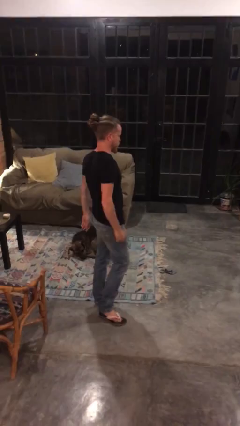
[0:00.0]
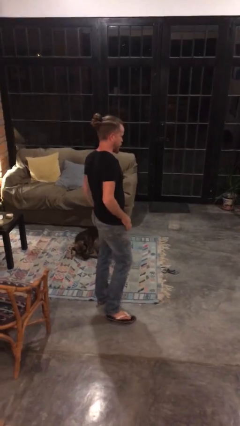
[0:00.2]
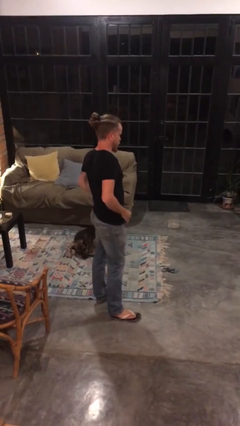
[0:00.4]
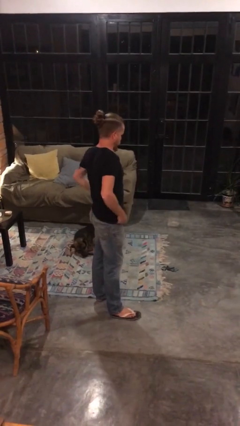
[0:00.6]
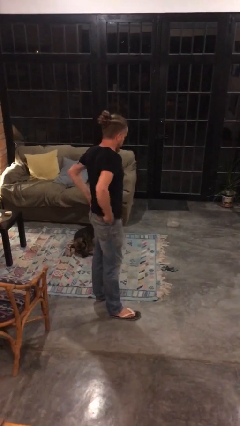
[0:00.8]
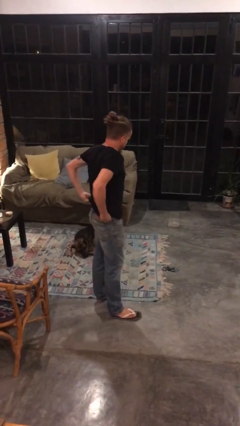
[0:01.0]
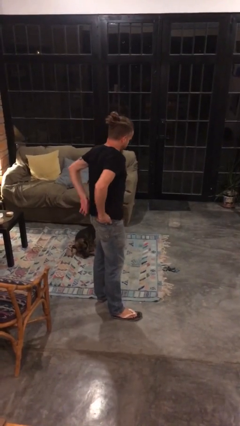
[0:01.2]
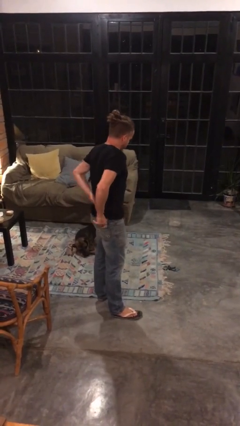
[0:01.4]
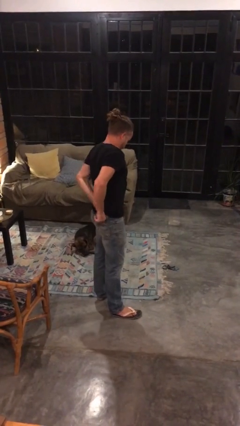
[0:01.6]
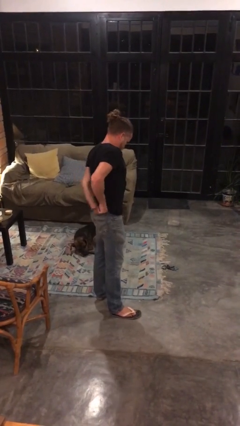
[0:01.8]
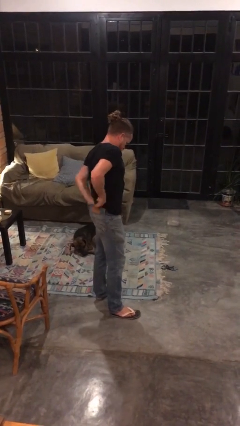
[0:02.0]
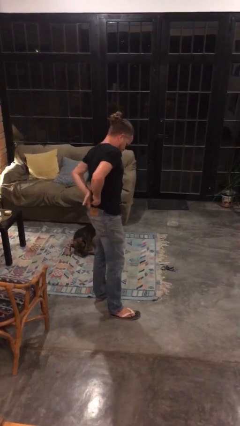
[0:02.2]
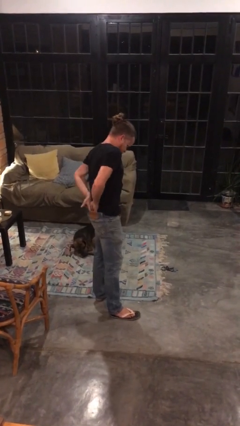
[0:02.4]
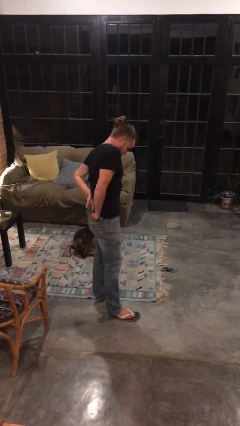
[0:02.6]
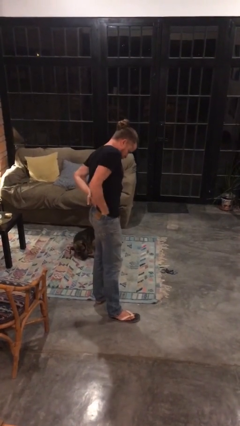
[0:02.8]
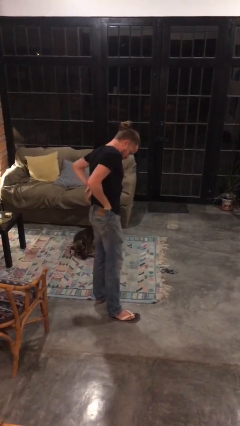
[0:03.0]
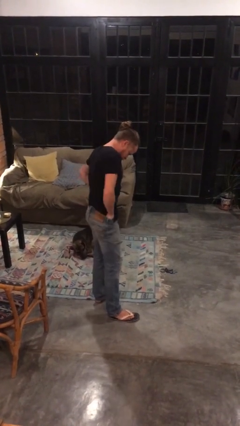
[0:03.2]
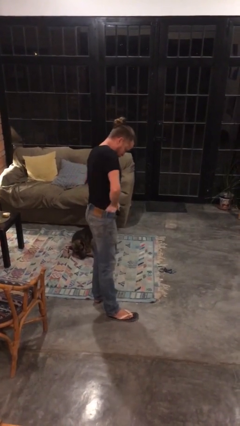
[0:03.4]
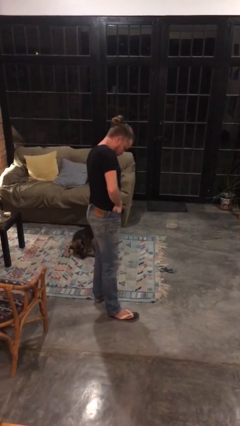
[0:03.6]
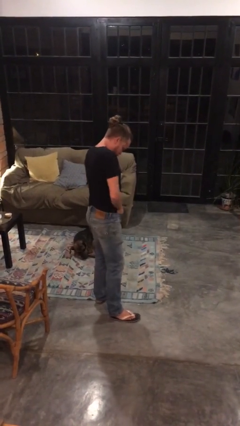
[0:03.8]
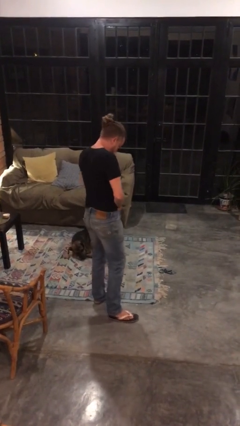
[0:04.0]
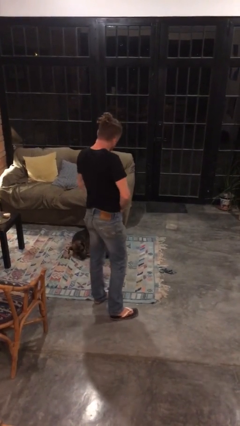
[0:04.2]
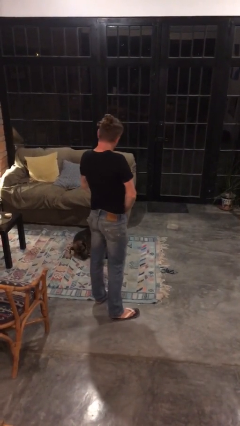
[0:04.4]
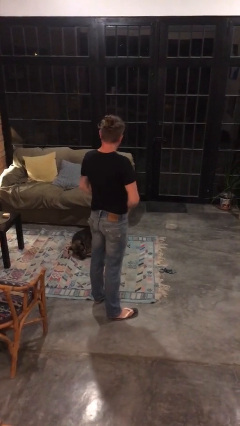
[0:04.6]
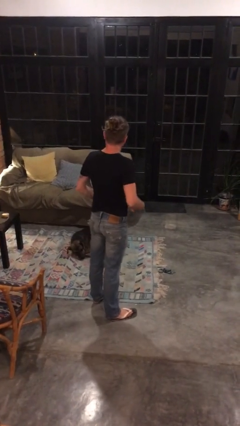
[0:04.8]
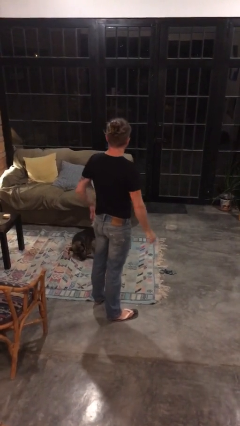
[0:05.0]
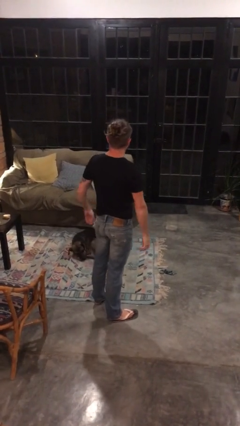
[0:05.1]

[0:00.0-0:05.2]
person tucks in shirt

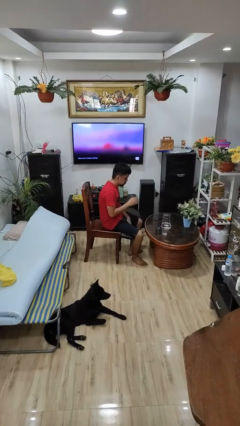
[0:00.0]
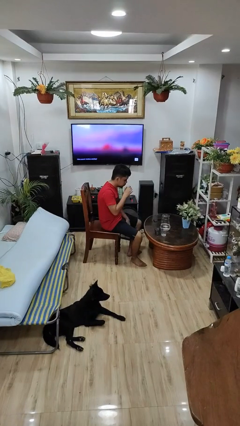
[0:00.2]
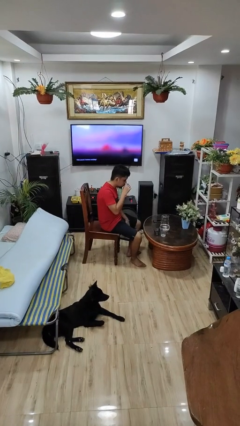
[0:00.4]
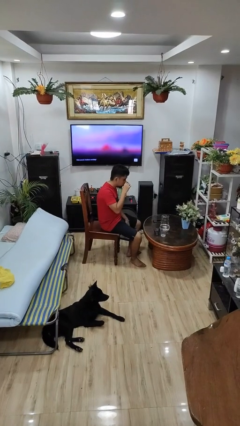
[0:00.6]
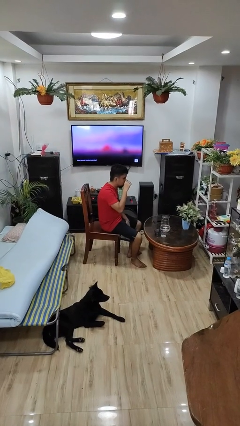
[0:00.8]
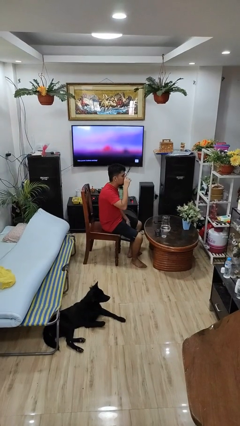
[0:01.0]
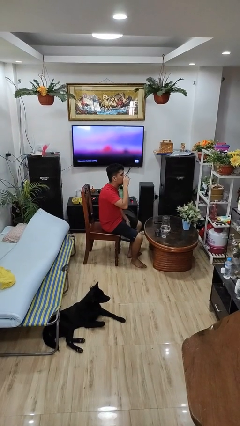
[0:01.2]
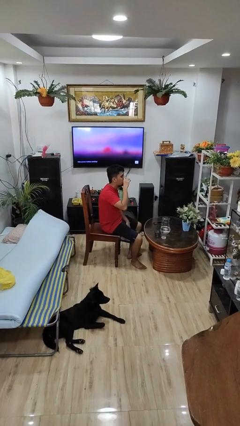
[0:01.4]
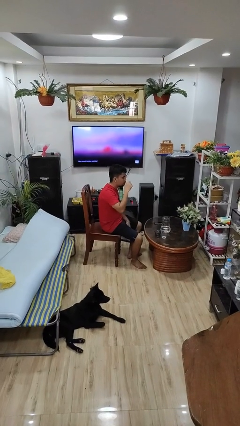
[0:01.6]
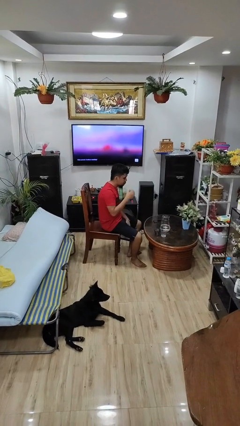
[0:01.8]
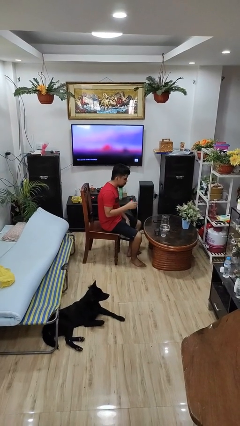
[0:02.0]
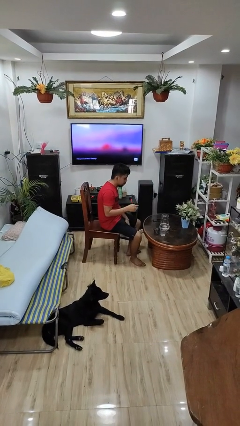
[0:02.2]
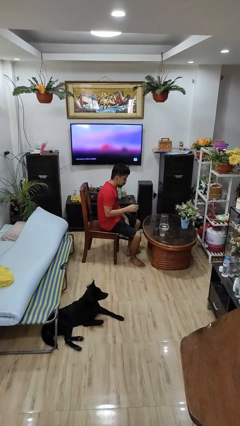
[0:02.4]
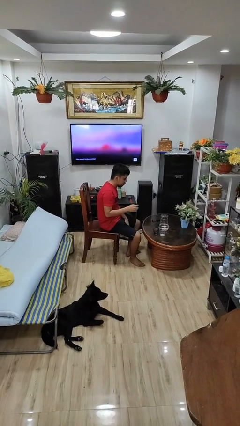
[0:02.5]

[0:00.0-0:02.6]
person drinks from shotglass

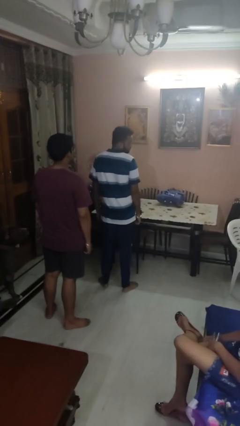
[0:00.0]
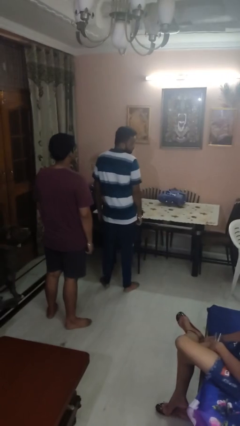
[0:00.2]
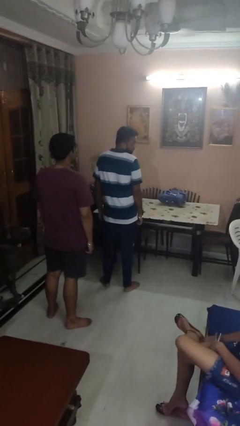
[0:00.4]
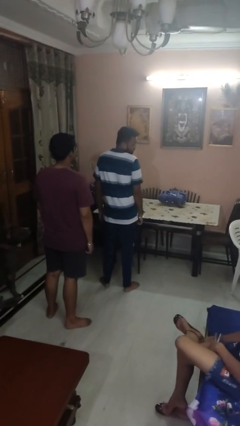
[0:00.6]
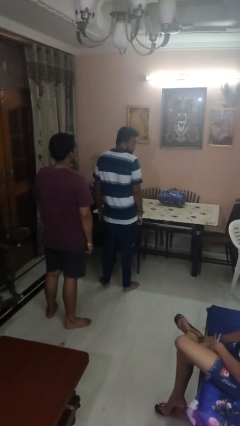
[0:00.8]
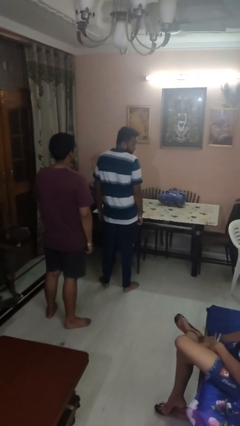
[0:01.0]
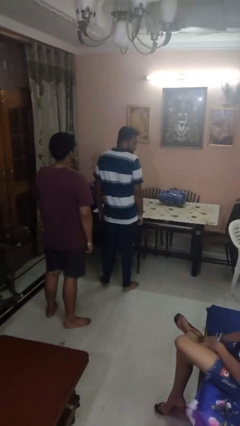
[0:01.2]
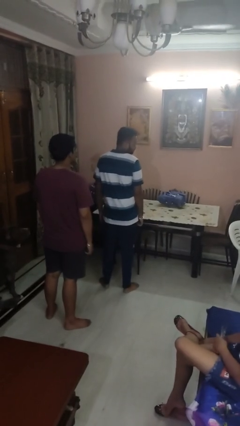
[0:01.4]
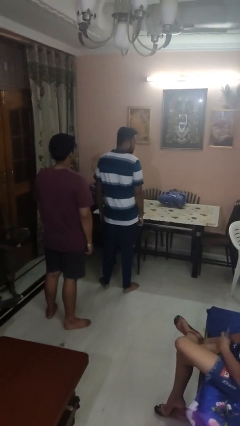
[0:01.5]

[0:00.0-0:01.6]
person looks over shoulder

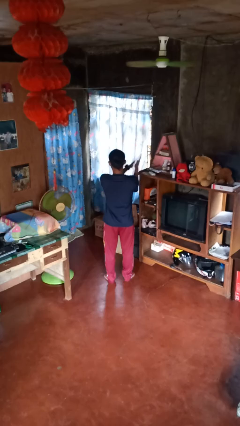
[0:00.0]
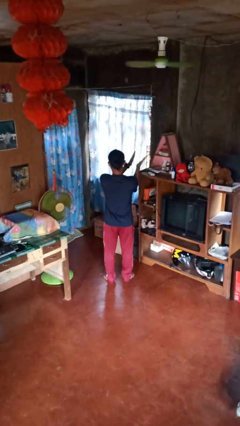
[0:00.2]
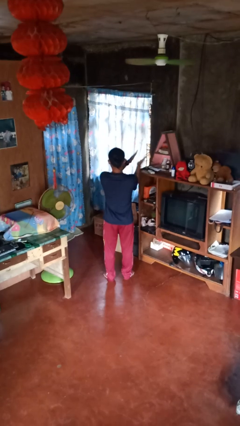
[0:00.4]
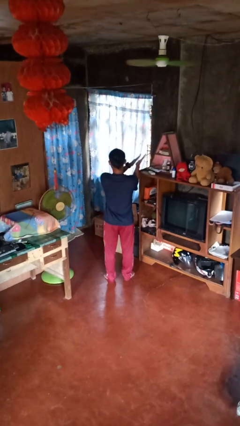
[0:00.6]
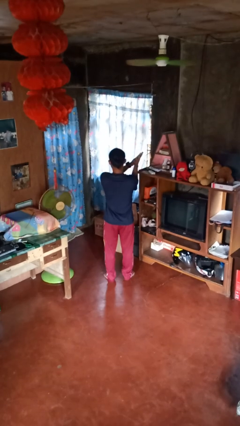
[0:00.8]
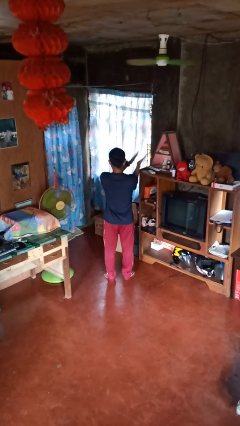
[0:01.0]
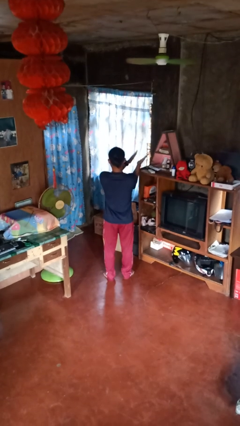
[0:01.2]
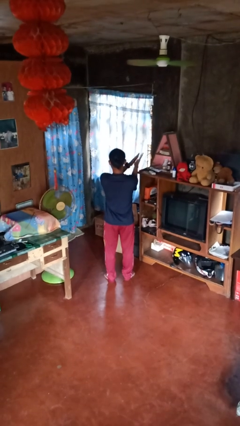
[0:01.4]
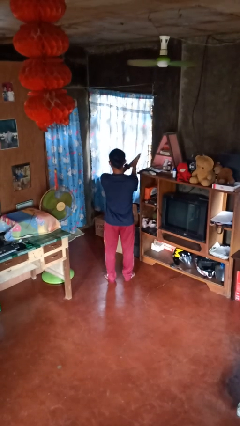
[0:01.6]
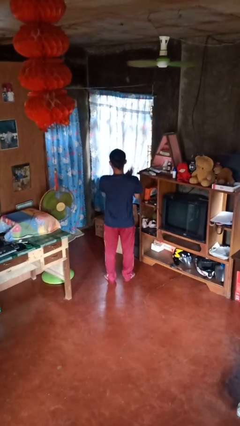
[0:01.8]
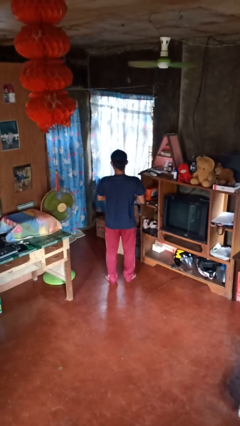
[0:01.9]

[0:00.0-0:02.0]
person claps hands

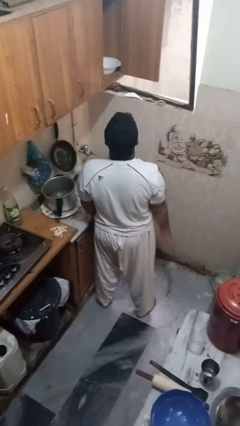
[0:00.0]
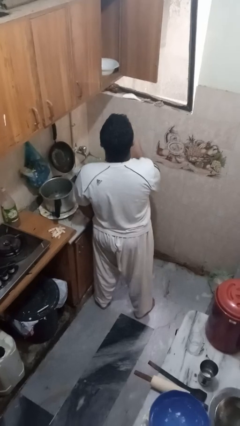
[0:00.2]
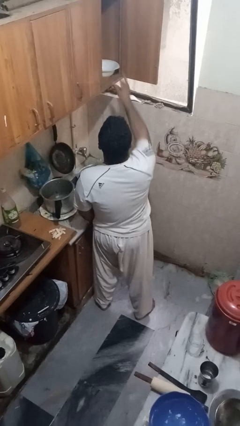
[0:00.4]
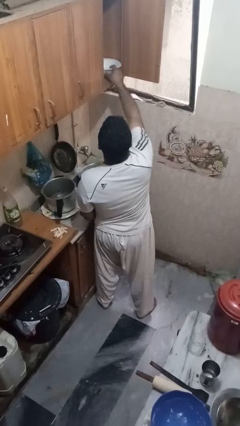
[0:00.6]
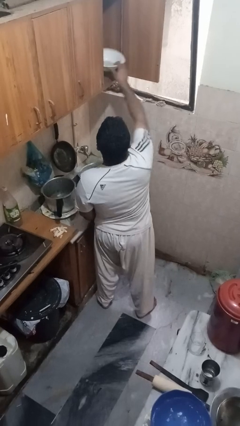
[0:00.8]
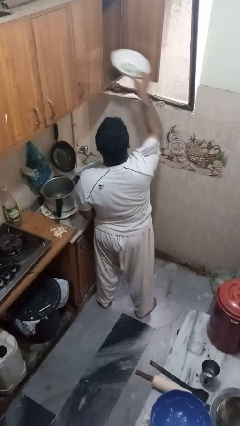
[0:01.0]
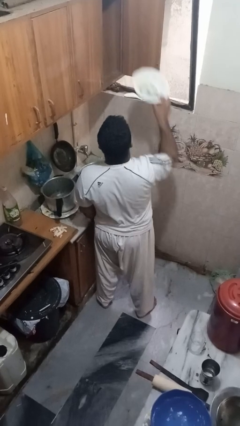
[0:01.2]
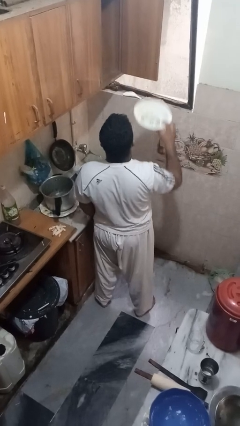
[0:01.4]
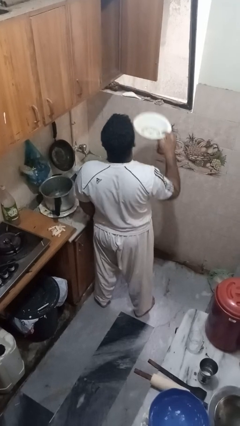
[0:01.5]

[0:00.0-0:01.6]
person takes object from cabinet

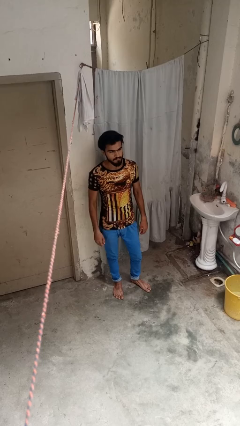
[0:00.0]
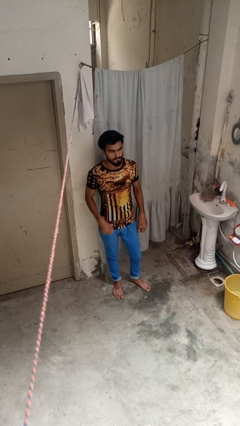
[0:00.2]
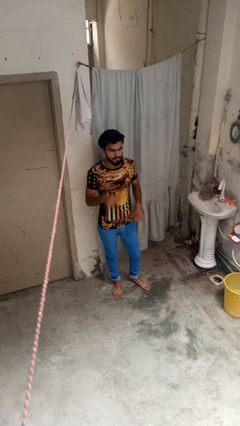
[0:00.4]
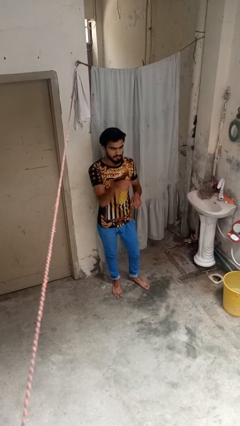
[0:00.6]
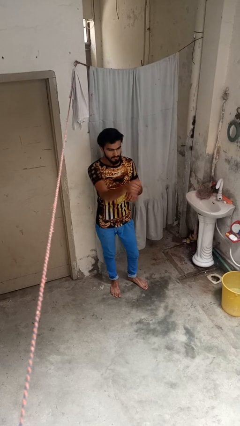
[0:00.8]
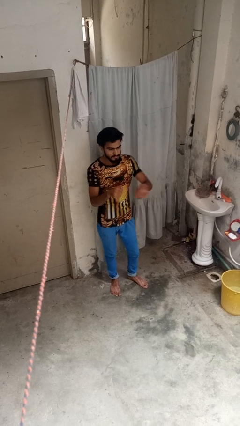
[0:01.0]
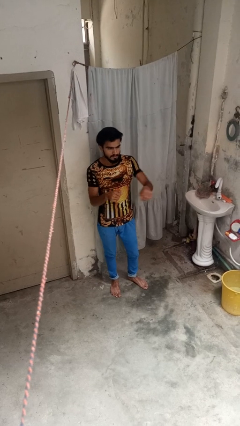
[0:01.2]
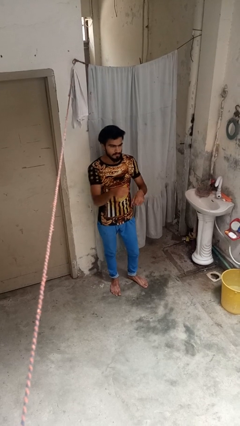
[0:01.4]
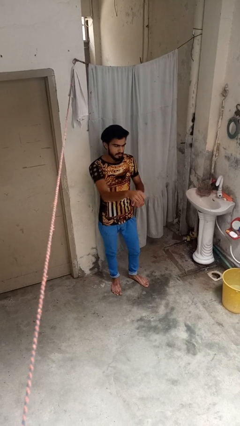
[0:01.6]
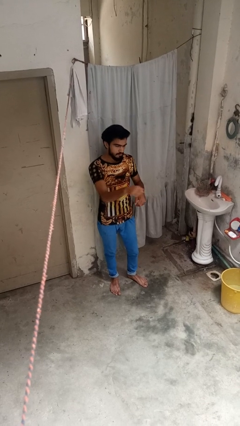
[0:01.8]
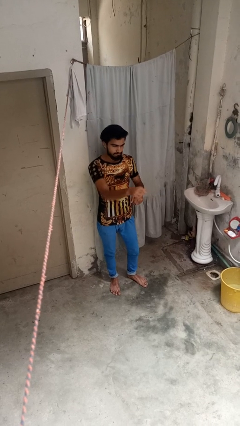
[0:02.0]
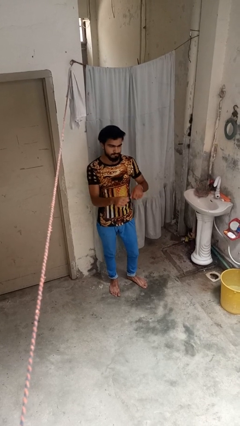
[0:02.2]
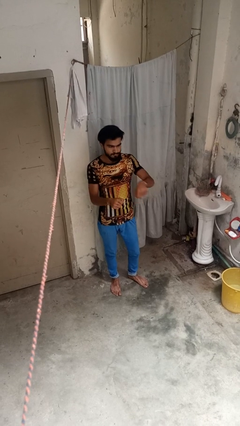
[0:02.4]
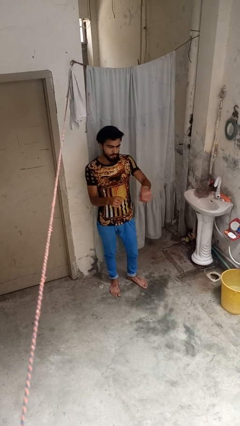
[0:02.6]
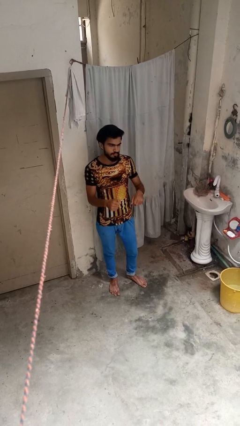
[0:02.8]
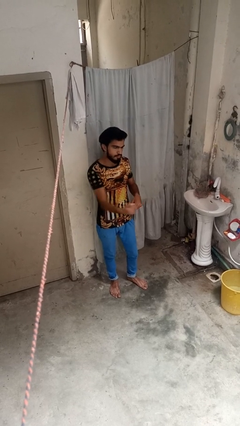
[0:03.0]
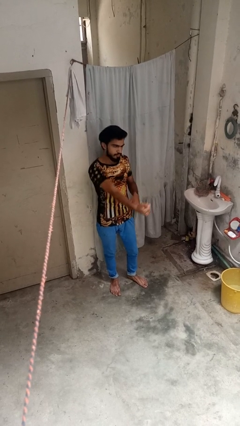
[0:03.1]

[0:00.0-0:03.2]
person punches

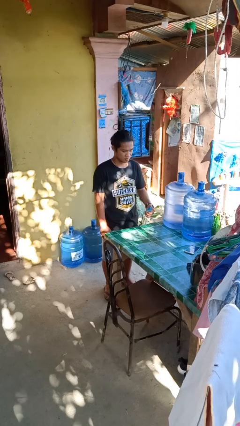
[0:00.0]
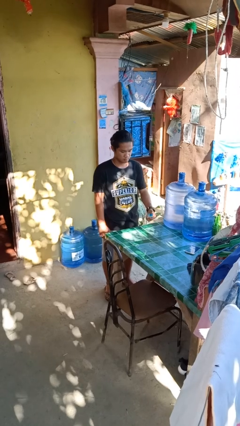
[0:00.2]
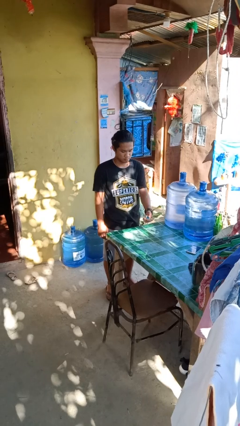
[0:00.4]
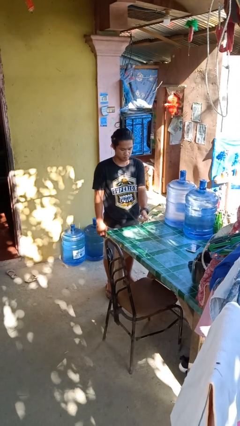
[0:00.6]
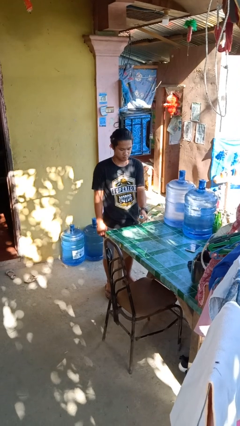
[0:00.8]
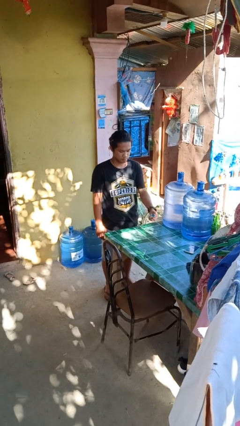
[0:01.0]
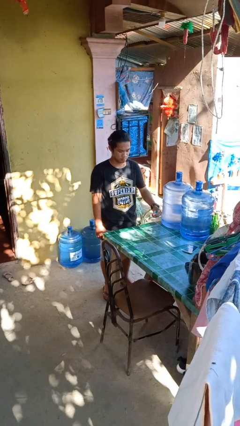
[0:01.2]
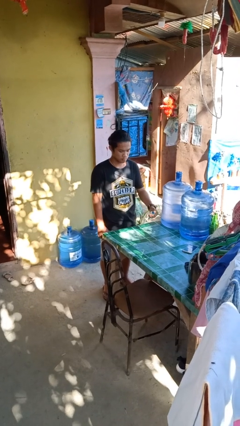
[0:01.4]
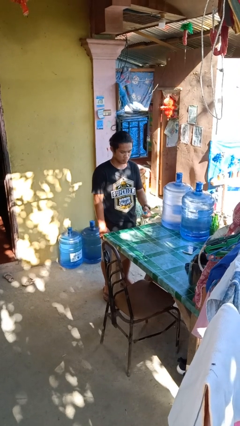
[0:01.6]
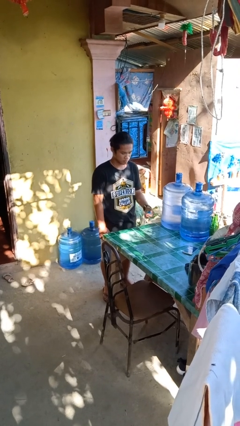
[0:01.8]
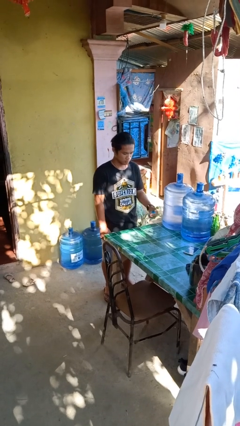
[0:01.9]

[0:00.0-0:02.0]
person sprays from bottle
